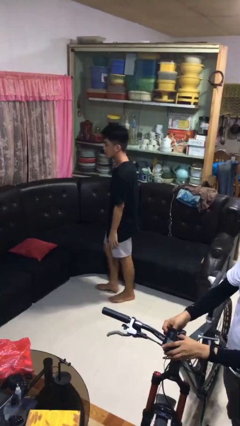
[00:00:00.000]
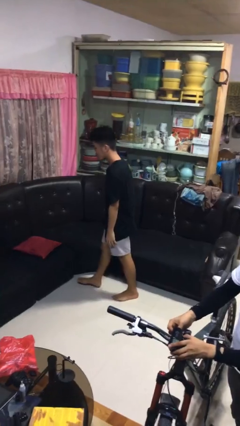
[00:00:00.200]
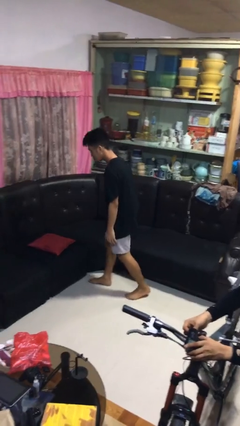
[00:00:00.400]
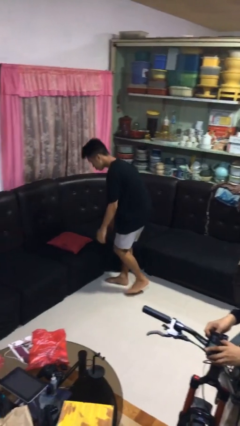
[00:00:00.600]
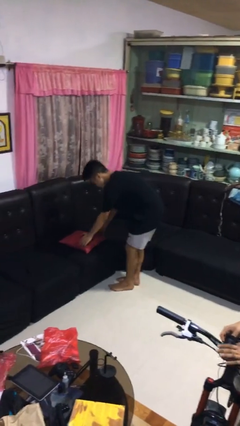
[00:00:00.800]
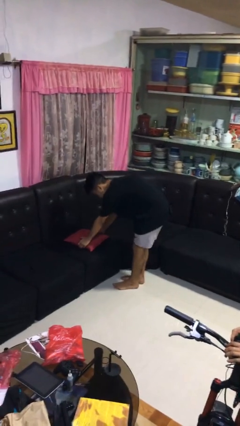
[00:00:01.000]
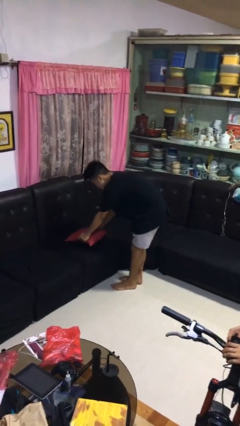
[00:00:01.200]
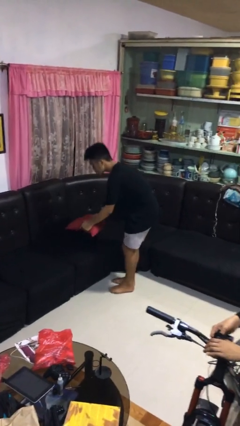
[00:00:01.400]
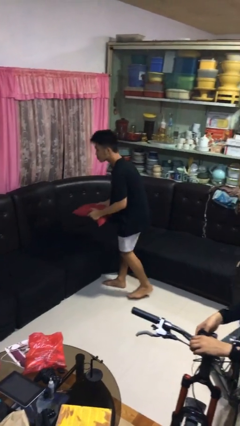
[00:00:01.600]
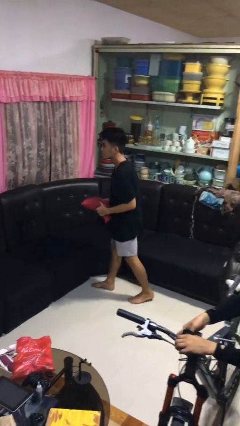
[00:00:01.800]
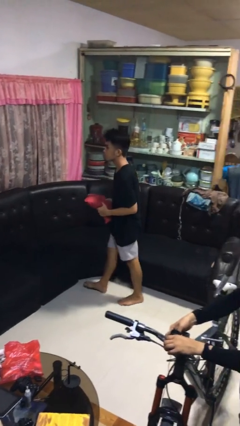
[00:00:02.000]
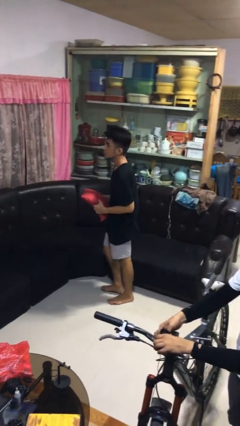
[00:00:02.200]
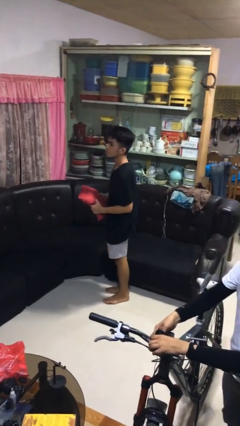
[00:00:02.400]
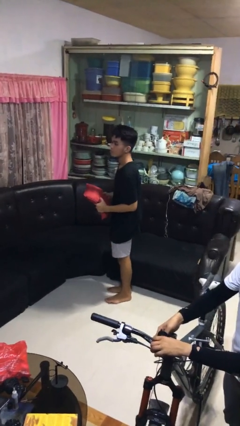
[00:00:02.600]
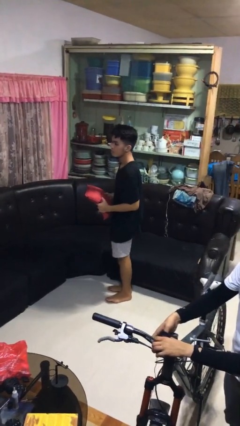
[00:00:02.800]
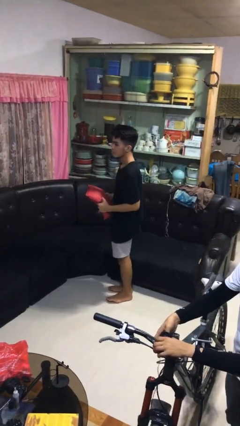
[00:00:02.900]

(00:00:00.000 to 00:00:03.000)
person picks up object from couch

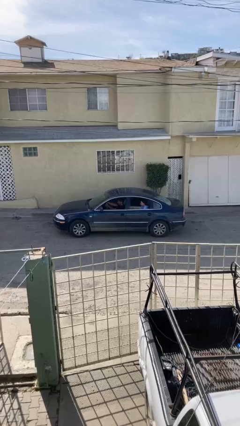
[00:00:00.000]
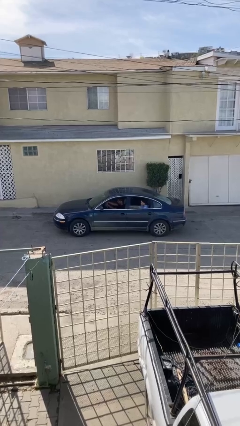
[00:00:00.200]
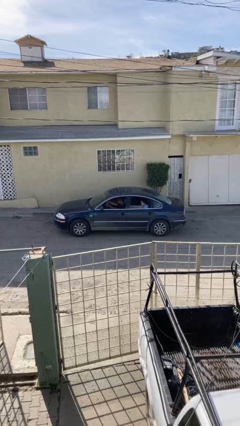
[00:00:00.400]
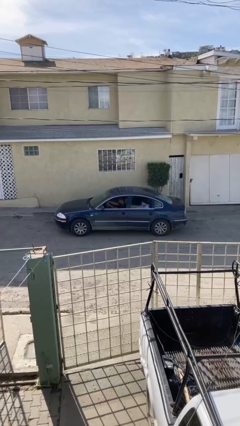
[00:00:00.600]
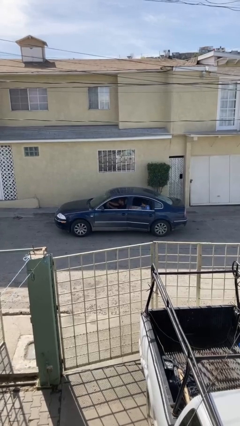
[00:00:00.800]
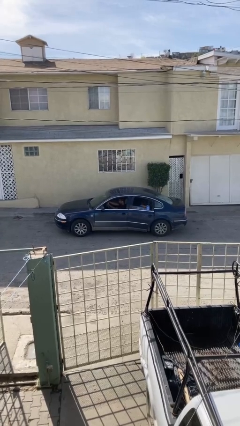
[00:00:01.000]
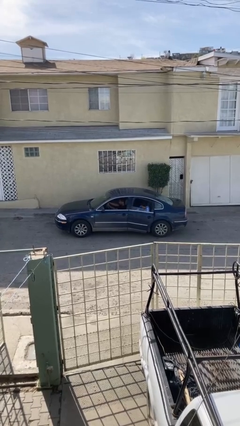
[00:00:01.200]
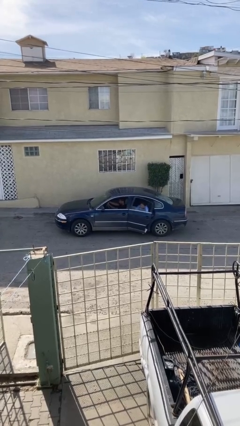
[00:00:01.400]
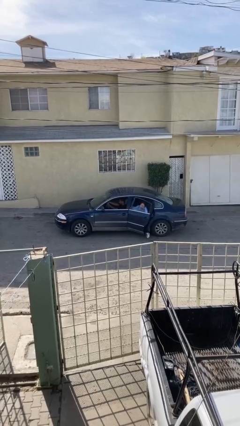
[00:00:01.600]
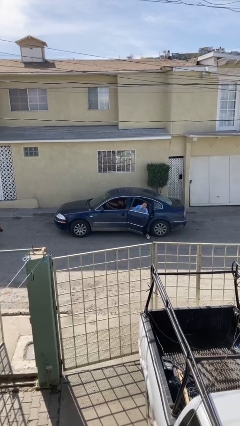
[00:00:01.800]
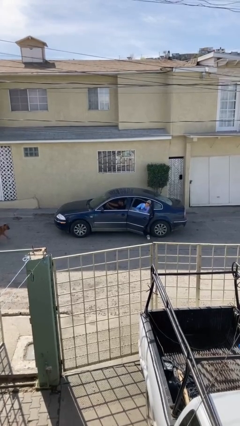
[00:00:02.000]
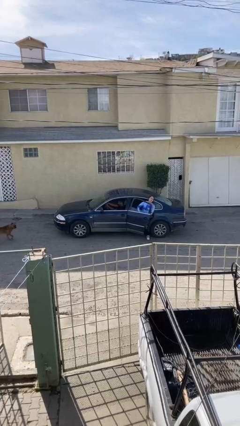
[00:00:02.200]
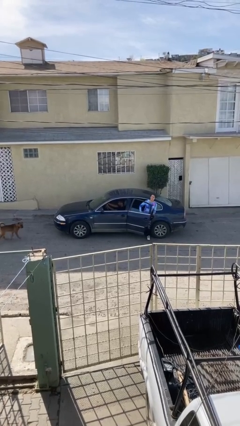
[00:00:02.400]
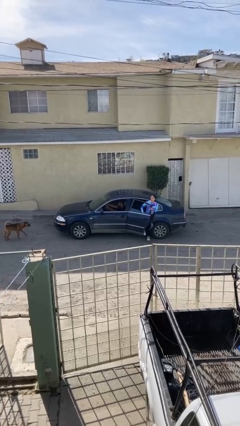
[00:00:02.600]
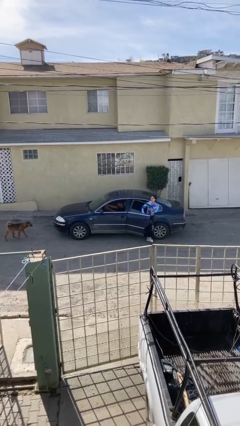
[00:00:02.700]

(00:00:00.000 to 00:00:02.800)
car drops off person

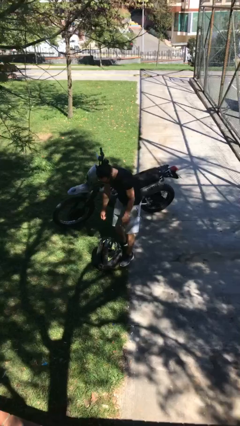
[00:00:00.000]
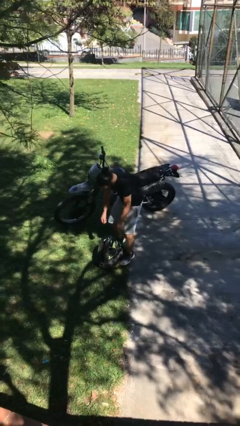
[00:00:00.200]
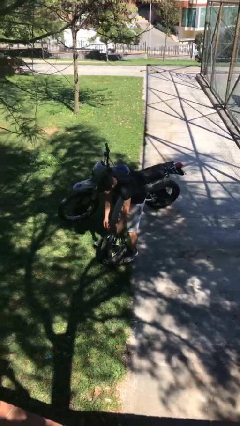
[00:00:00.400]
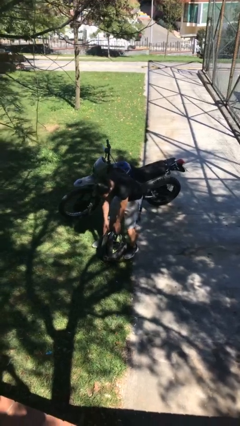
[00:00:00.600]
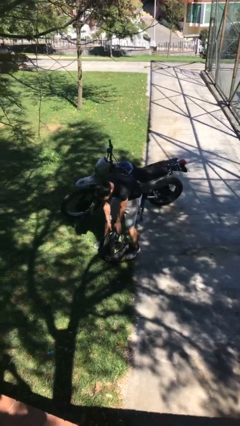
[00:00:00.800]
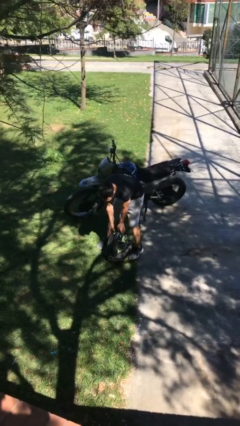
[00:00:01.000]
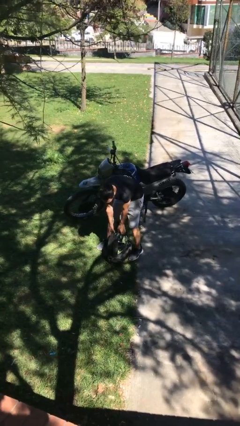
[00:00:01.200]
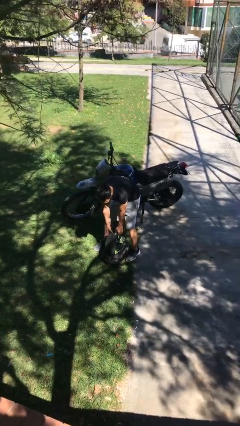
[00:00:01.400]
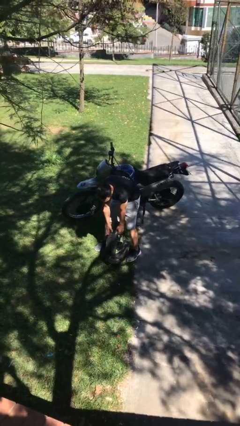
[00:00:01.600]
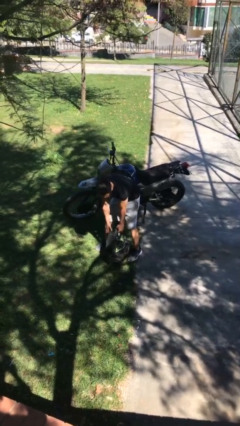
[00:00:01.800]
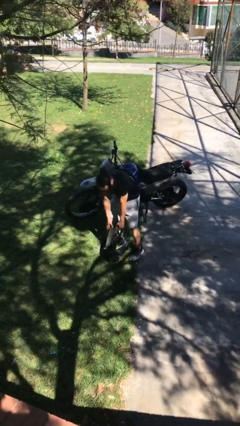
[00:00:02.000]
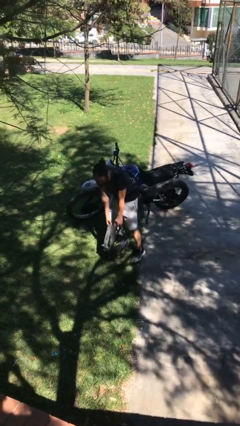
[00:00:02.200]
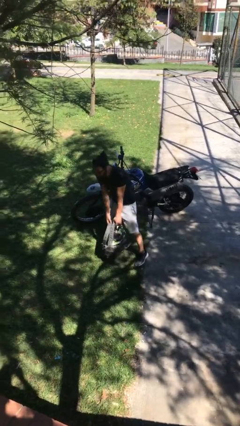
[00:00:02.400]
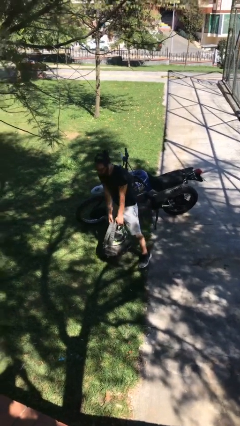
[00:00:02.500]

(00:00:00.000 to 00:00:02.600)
person picks up object from floor

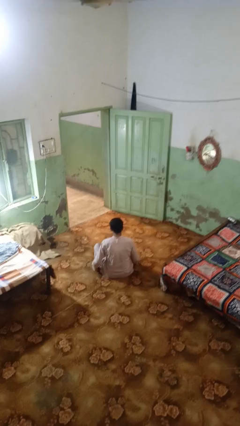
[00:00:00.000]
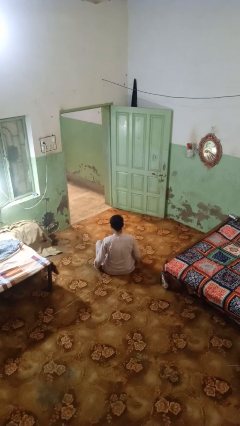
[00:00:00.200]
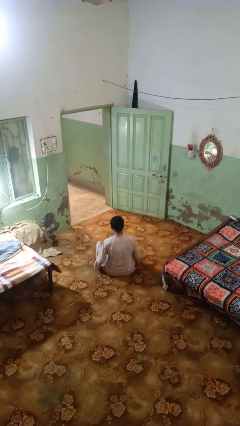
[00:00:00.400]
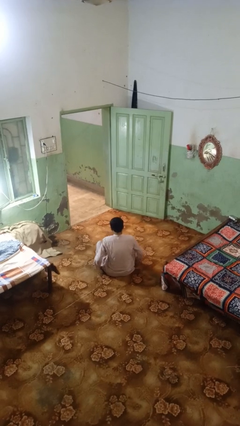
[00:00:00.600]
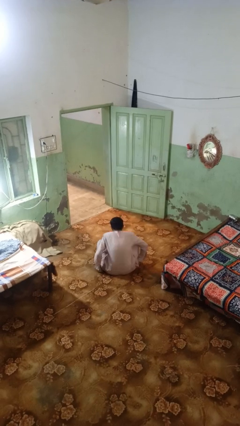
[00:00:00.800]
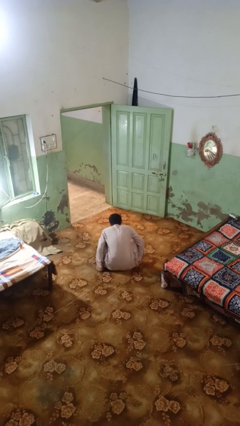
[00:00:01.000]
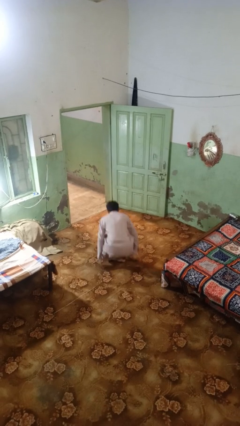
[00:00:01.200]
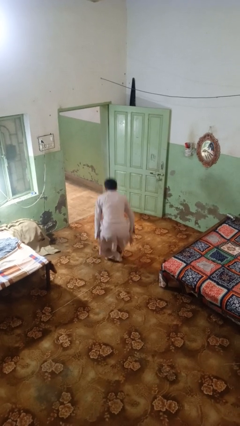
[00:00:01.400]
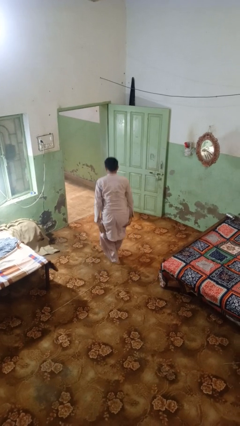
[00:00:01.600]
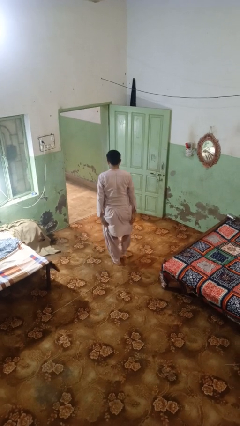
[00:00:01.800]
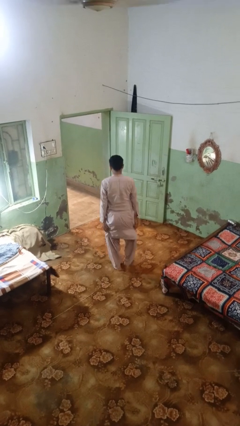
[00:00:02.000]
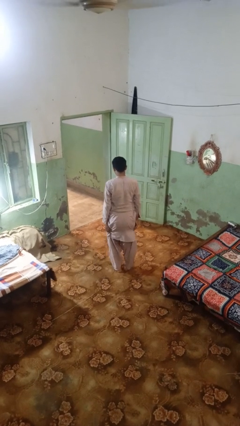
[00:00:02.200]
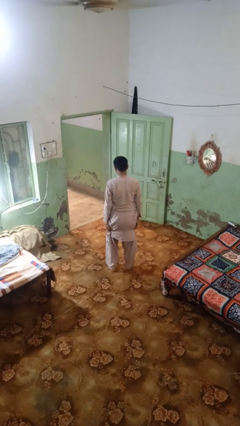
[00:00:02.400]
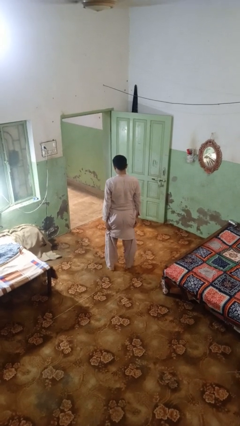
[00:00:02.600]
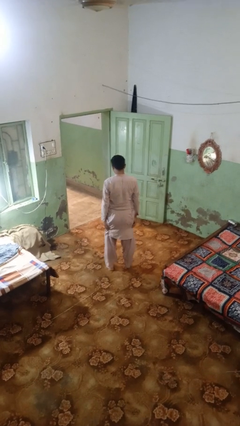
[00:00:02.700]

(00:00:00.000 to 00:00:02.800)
person stands up from floor

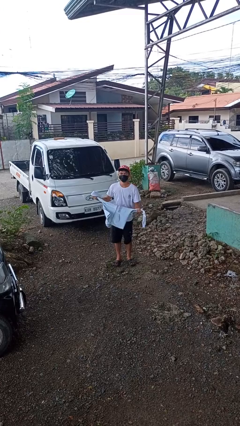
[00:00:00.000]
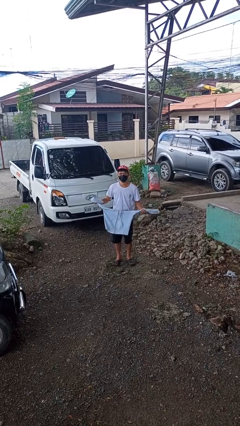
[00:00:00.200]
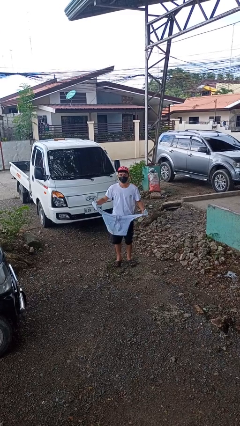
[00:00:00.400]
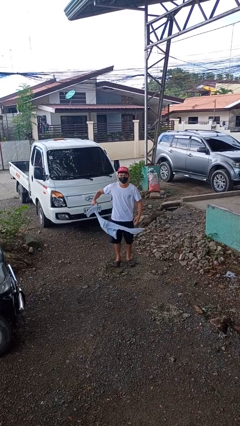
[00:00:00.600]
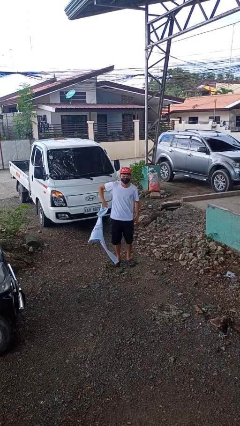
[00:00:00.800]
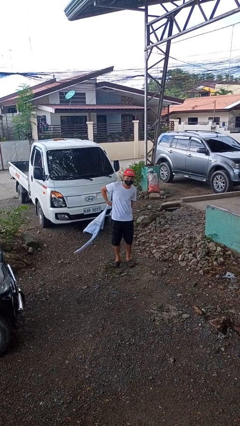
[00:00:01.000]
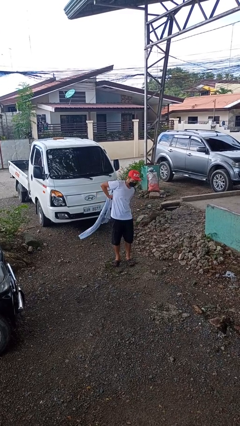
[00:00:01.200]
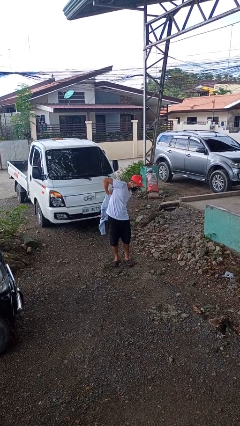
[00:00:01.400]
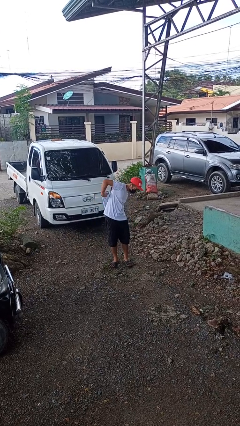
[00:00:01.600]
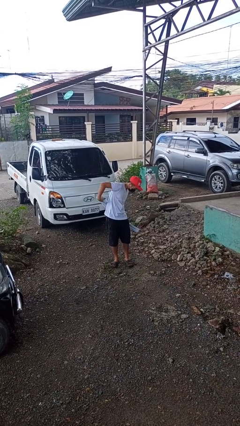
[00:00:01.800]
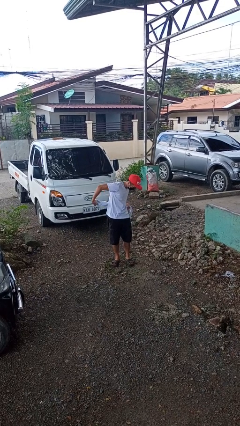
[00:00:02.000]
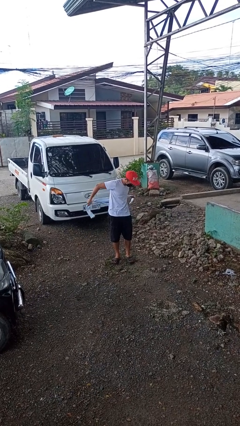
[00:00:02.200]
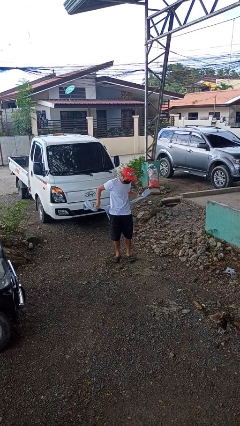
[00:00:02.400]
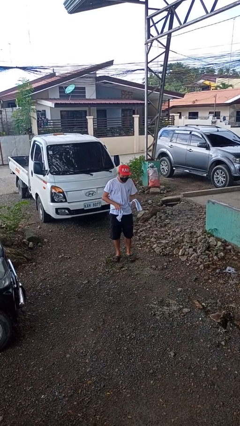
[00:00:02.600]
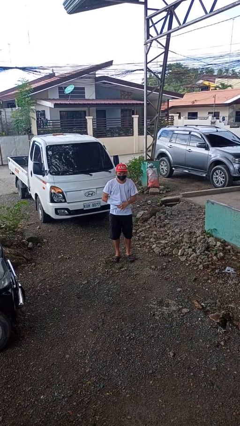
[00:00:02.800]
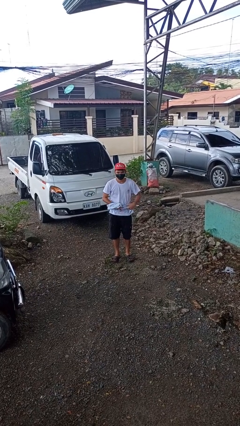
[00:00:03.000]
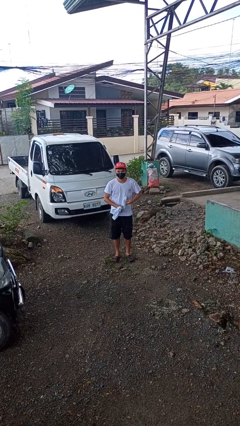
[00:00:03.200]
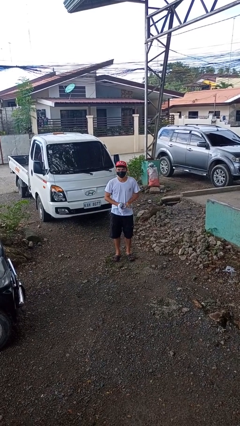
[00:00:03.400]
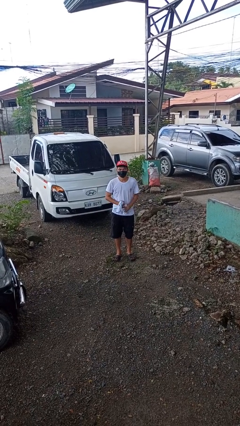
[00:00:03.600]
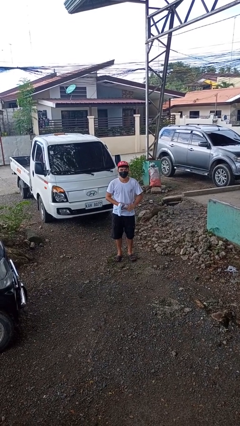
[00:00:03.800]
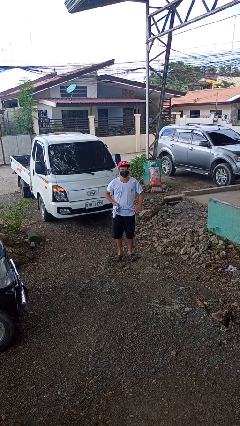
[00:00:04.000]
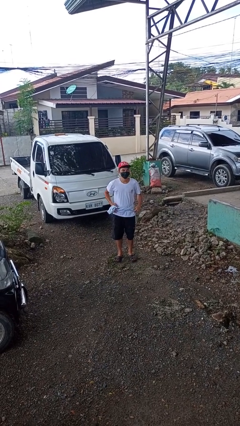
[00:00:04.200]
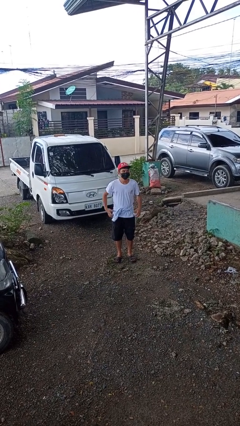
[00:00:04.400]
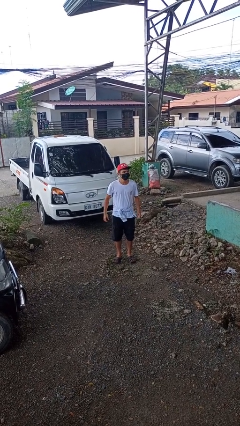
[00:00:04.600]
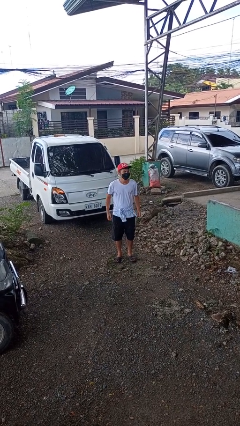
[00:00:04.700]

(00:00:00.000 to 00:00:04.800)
person ties jacket around waist

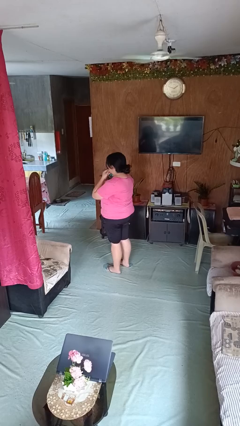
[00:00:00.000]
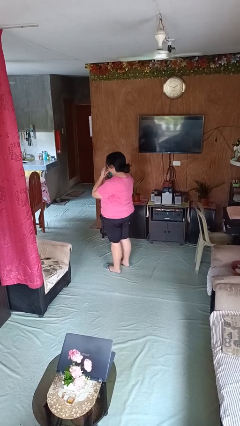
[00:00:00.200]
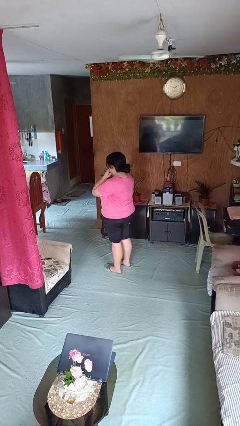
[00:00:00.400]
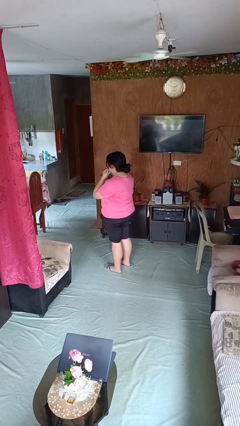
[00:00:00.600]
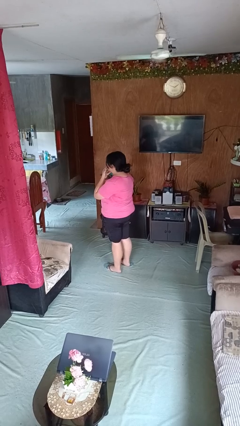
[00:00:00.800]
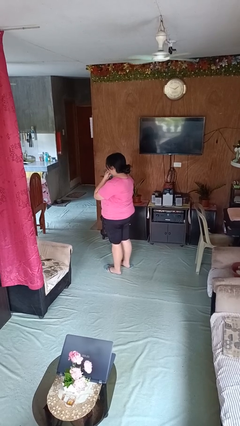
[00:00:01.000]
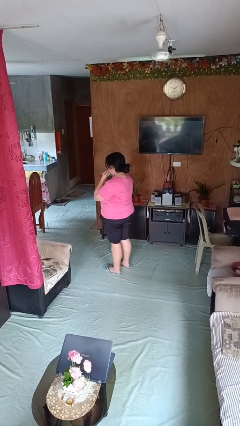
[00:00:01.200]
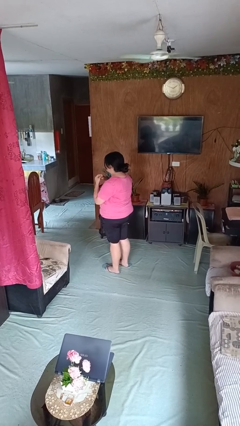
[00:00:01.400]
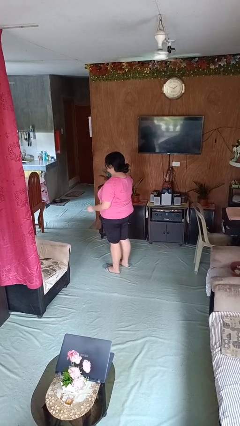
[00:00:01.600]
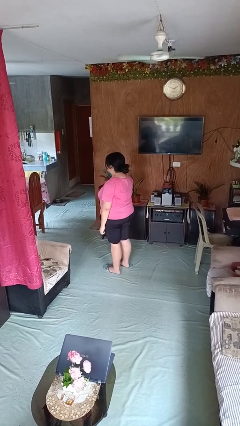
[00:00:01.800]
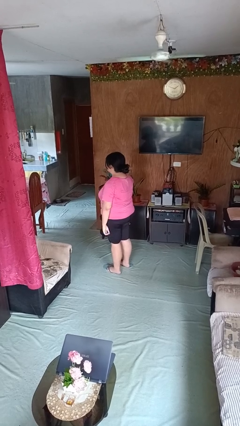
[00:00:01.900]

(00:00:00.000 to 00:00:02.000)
person strokes chin
